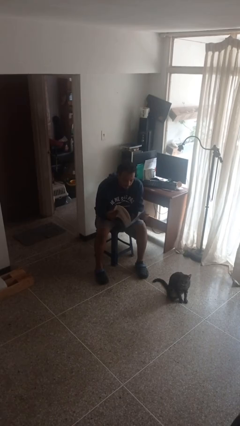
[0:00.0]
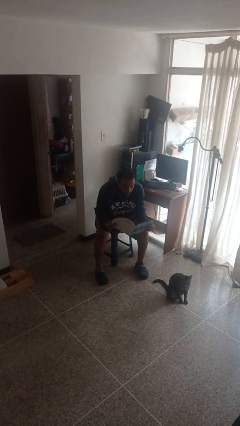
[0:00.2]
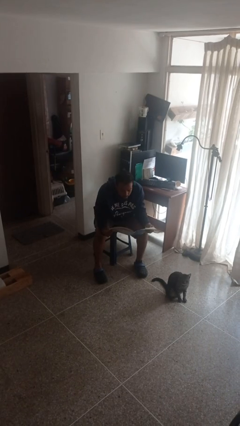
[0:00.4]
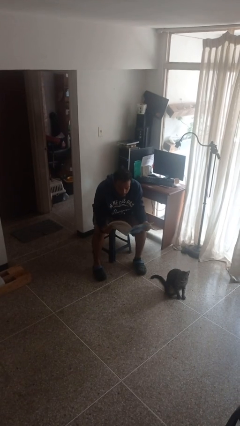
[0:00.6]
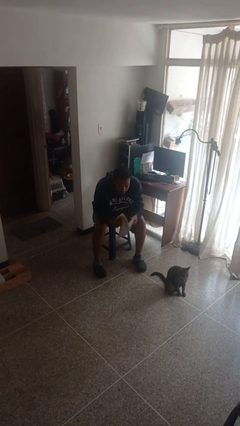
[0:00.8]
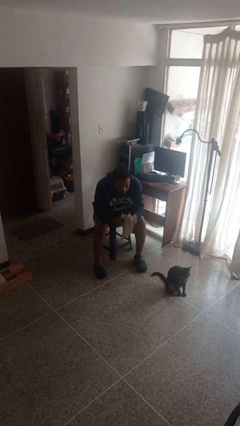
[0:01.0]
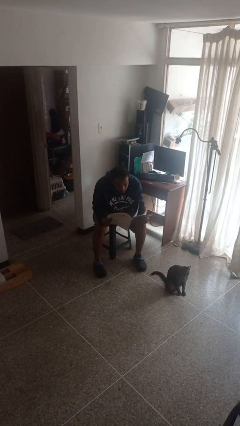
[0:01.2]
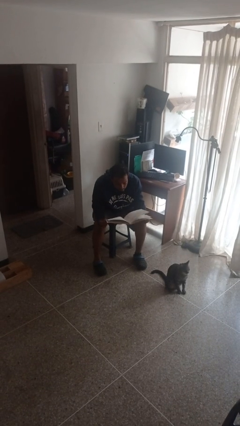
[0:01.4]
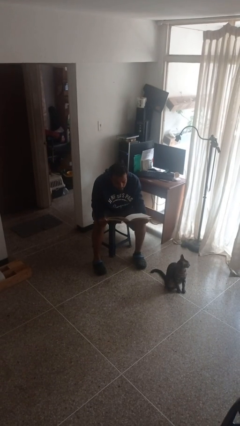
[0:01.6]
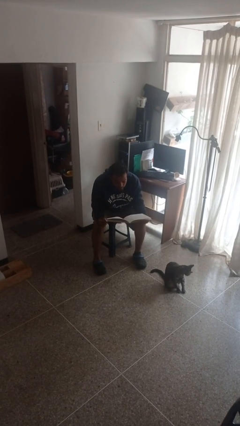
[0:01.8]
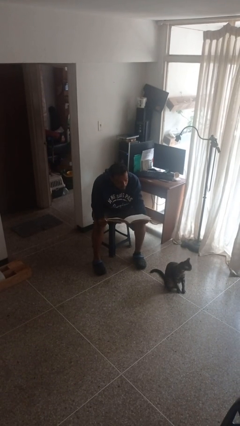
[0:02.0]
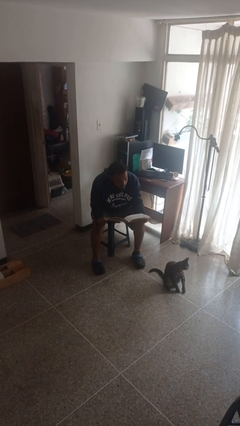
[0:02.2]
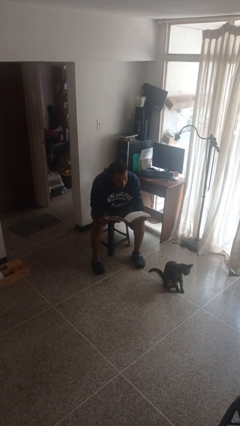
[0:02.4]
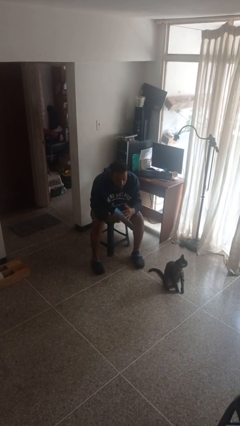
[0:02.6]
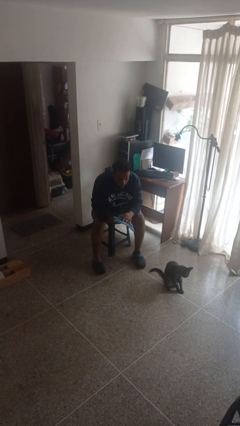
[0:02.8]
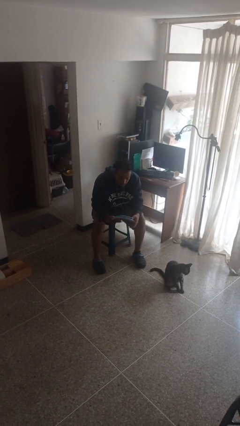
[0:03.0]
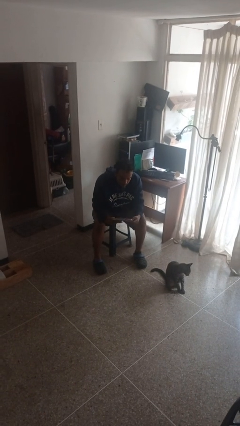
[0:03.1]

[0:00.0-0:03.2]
person reads magazine

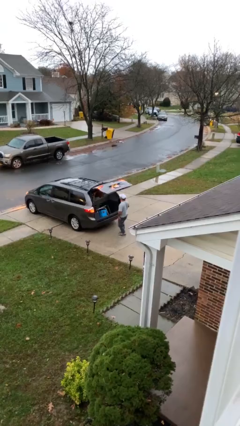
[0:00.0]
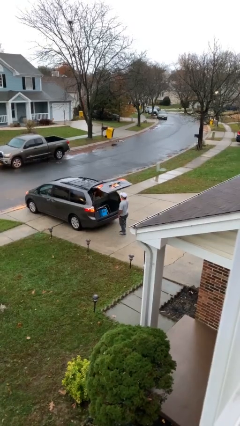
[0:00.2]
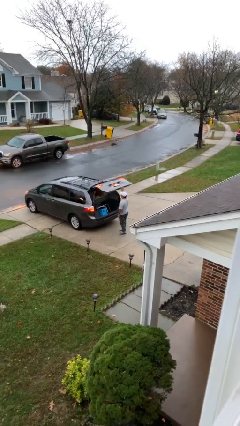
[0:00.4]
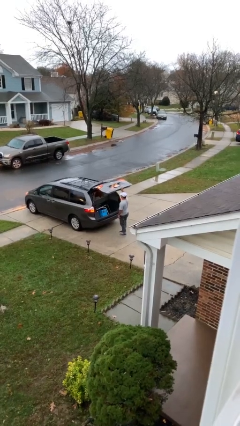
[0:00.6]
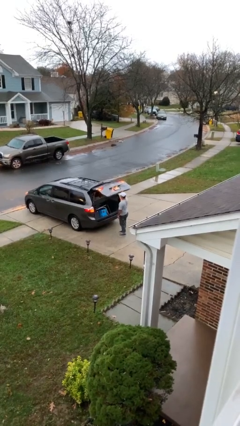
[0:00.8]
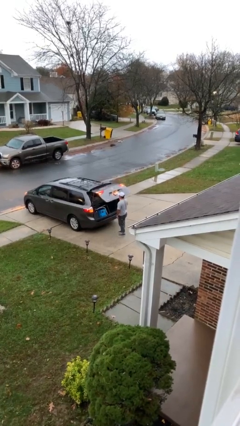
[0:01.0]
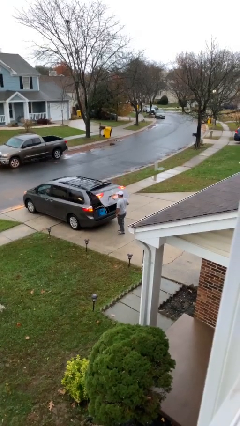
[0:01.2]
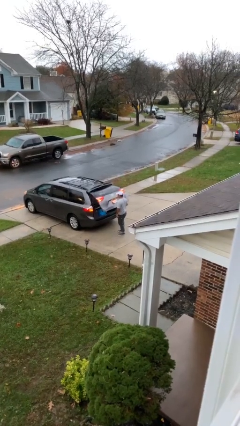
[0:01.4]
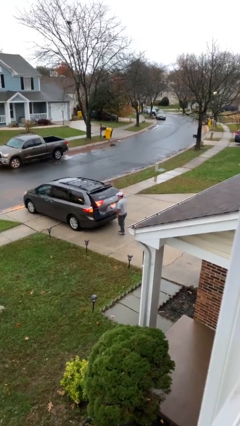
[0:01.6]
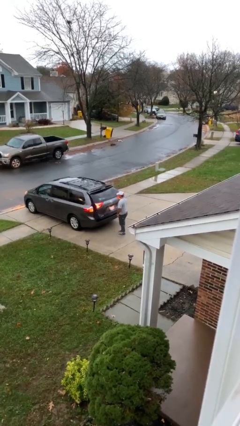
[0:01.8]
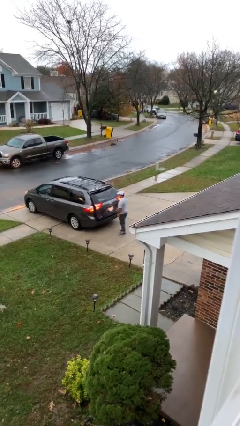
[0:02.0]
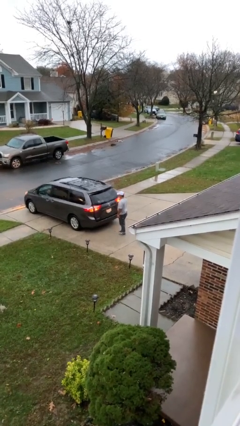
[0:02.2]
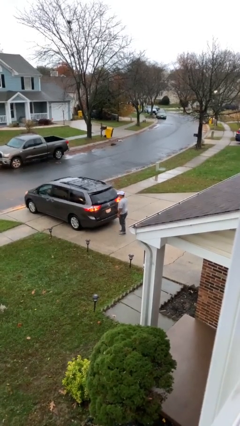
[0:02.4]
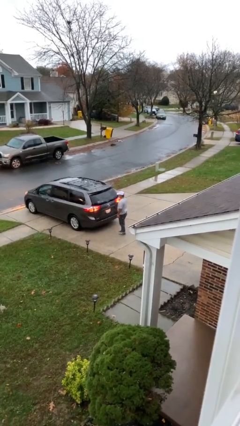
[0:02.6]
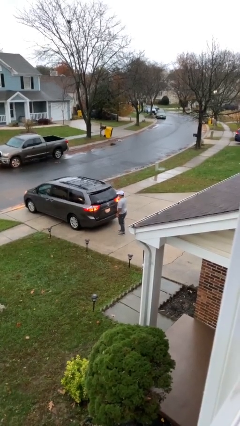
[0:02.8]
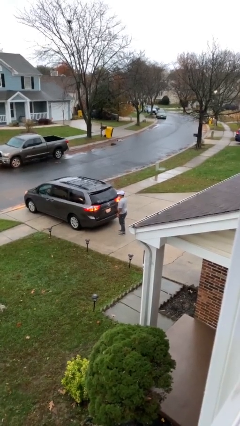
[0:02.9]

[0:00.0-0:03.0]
person closes car trunk

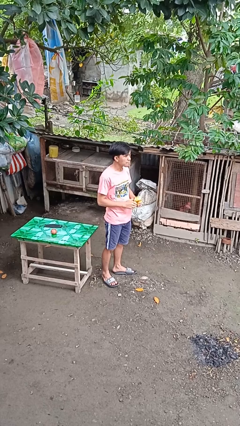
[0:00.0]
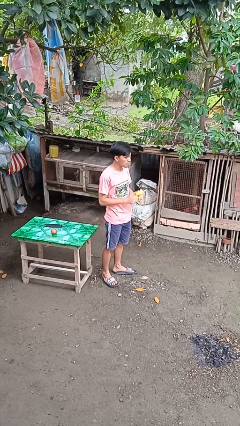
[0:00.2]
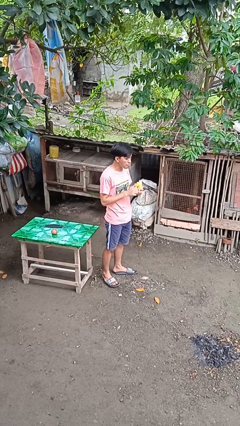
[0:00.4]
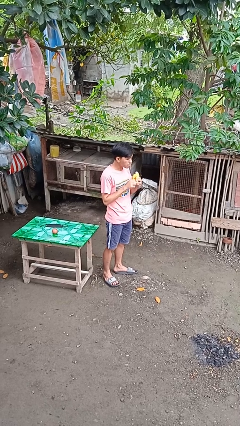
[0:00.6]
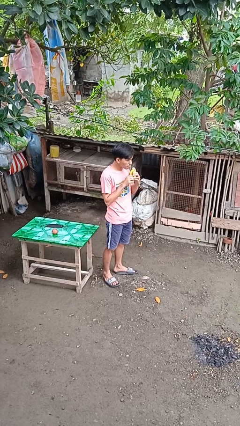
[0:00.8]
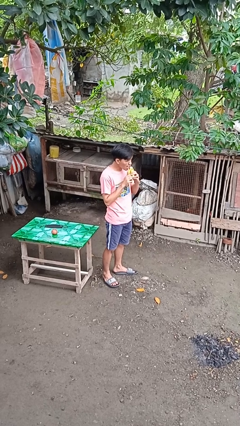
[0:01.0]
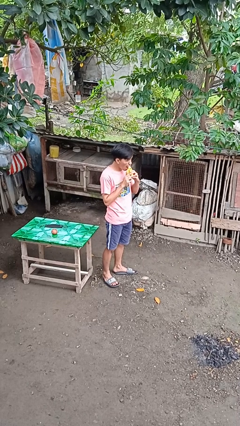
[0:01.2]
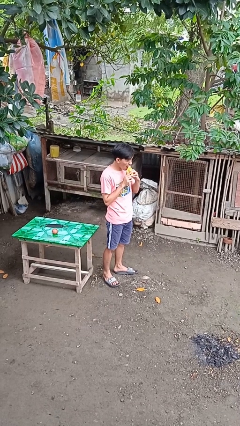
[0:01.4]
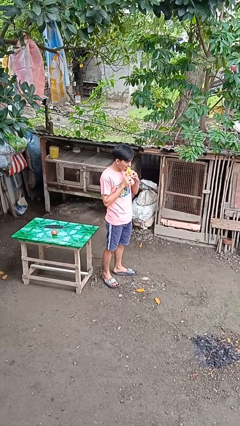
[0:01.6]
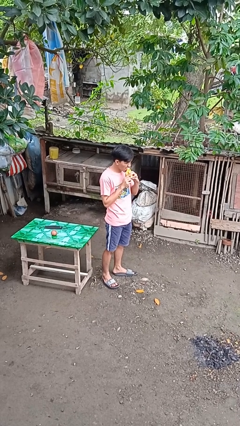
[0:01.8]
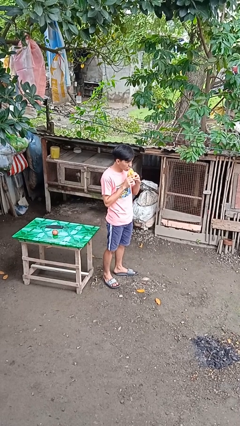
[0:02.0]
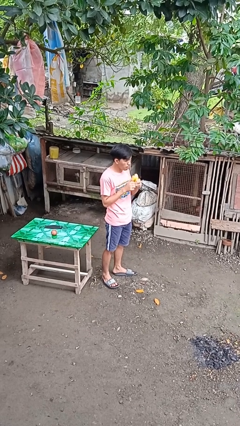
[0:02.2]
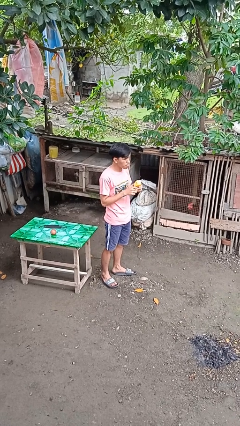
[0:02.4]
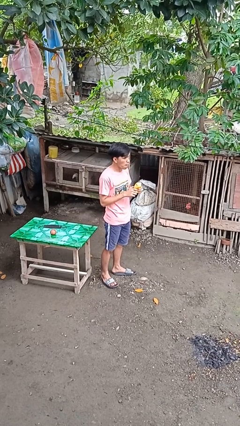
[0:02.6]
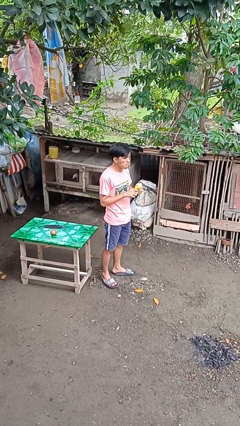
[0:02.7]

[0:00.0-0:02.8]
person eats banana

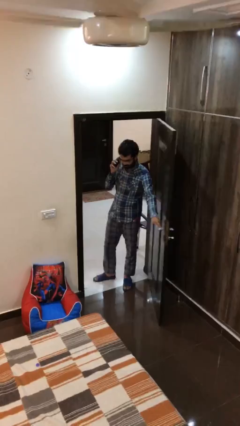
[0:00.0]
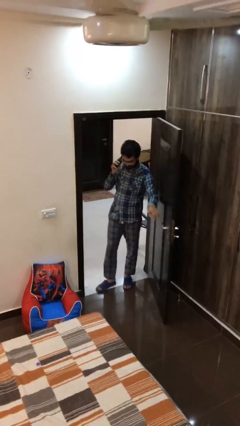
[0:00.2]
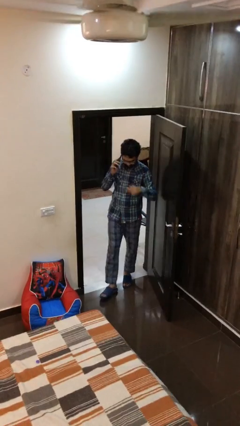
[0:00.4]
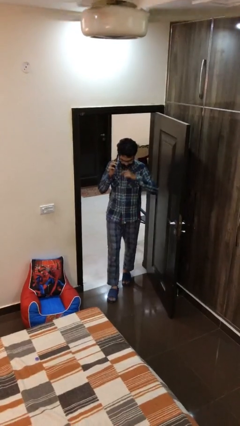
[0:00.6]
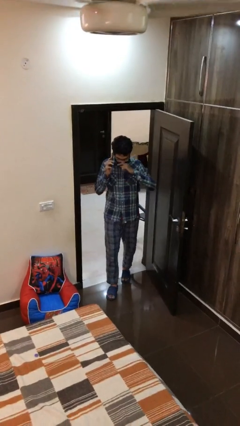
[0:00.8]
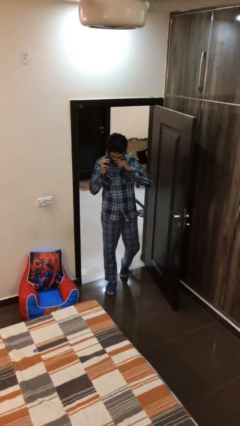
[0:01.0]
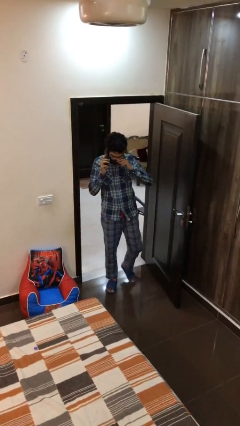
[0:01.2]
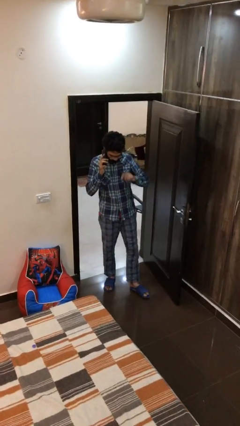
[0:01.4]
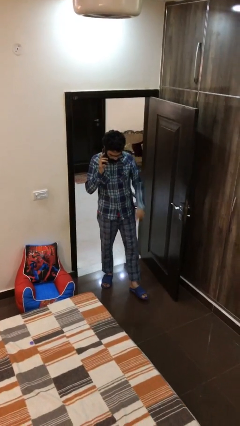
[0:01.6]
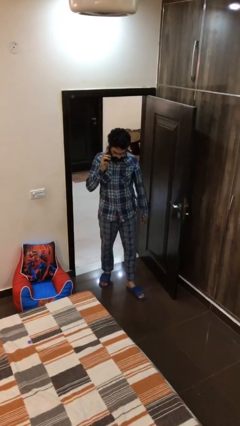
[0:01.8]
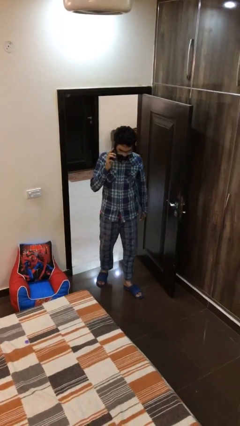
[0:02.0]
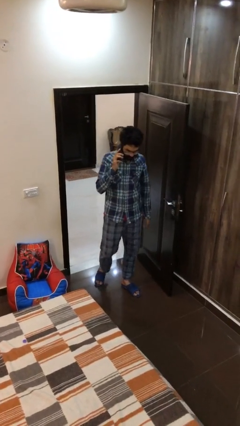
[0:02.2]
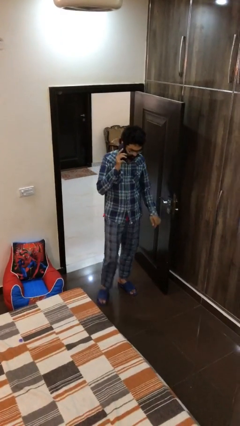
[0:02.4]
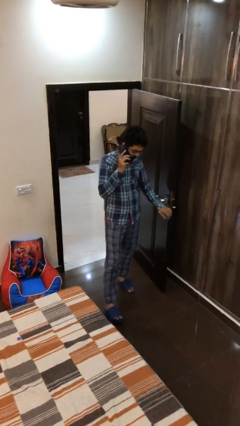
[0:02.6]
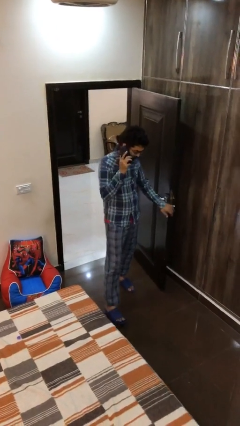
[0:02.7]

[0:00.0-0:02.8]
person enters scene through structure

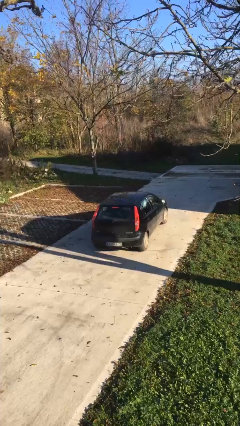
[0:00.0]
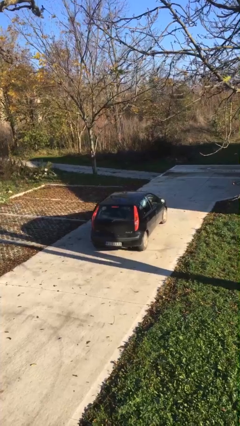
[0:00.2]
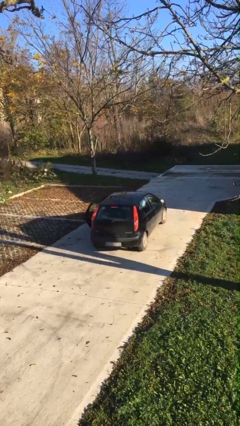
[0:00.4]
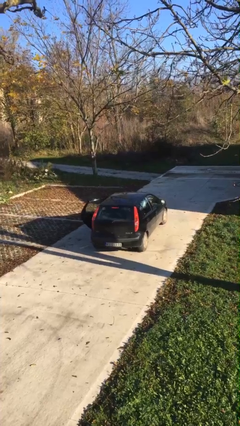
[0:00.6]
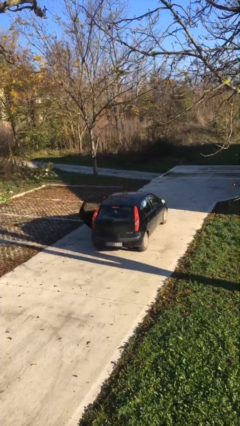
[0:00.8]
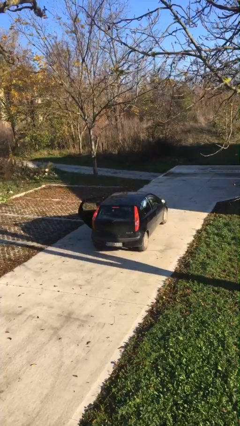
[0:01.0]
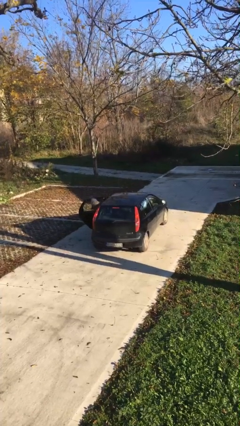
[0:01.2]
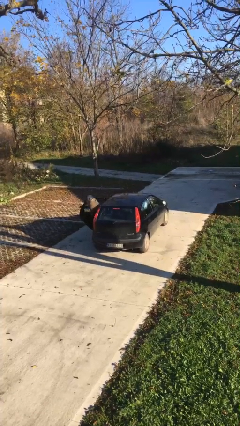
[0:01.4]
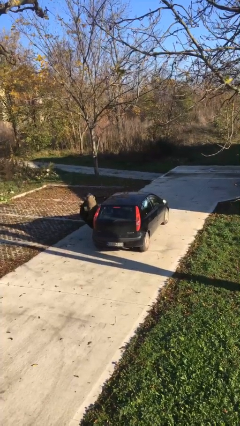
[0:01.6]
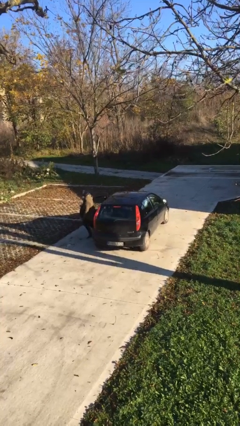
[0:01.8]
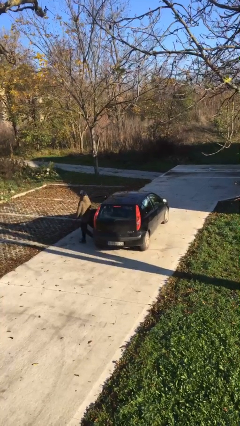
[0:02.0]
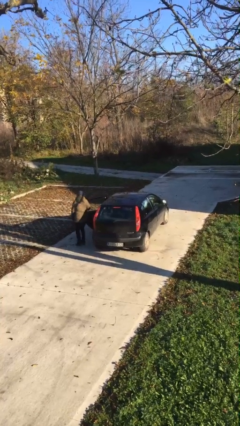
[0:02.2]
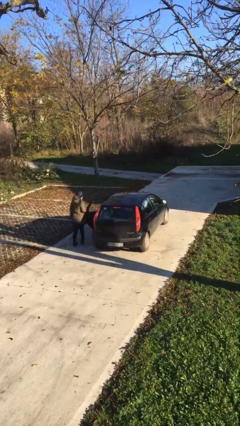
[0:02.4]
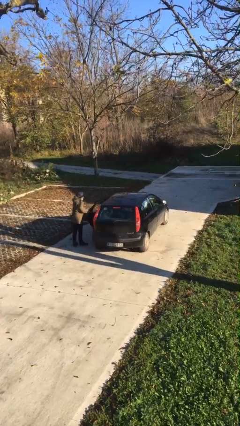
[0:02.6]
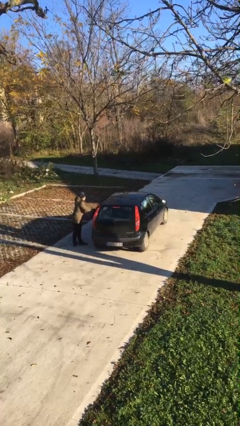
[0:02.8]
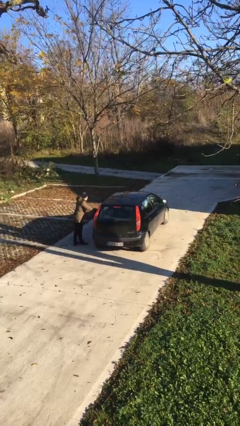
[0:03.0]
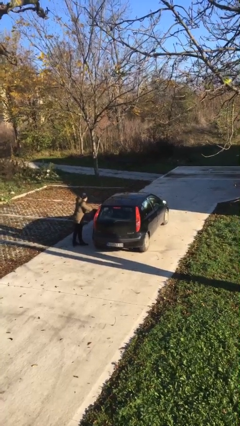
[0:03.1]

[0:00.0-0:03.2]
car drops off person

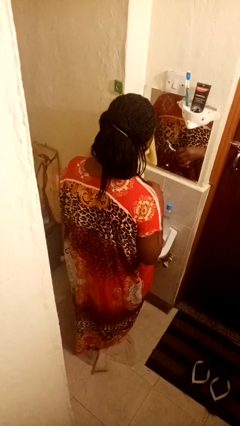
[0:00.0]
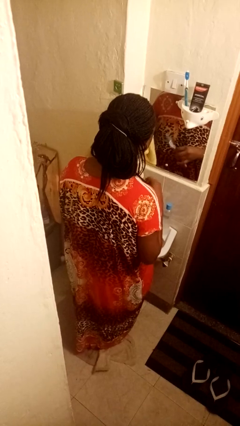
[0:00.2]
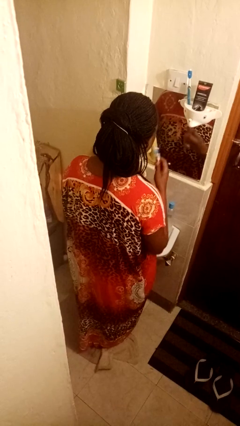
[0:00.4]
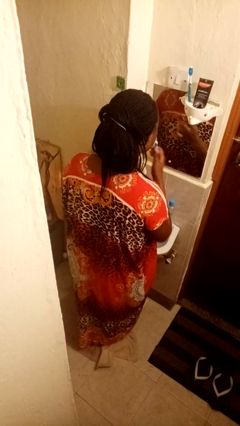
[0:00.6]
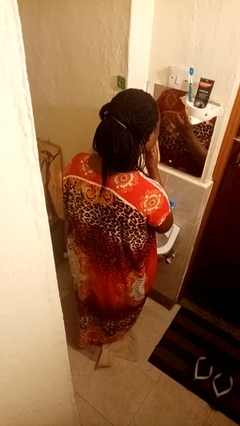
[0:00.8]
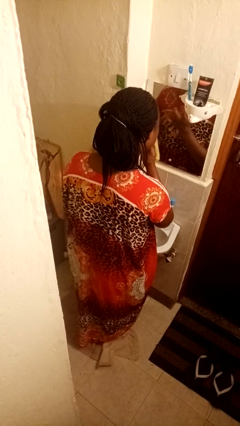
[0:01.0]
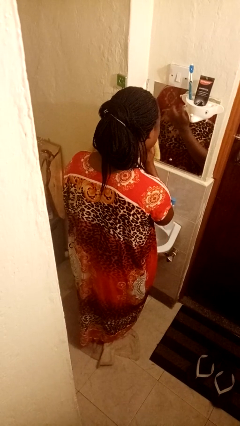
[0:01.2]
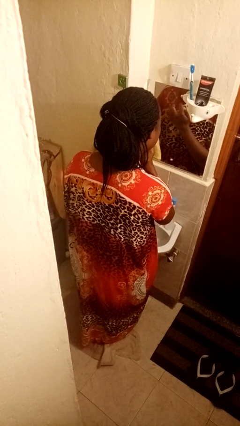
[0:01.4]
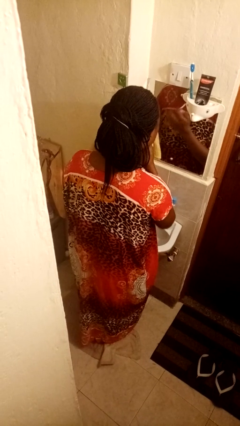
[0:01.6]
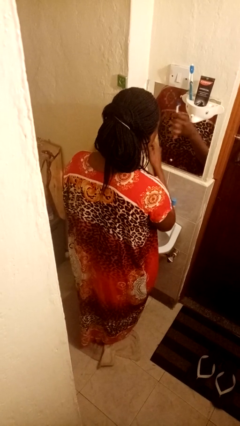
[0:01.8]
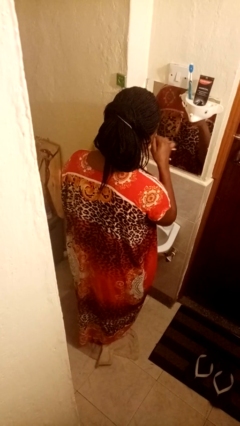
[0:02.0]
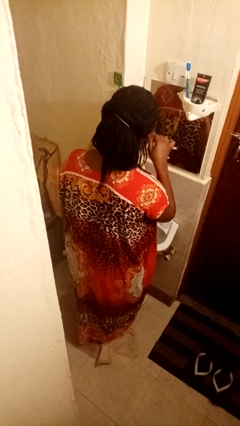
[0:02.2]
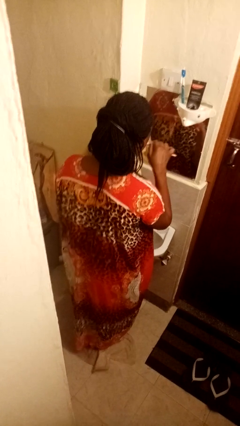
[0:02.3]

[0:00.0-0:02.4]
person brushes teeth

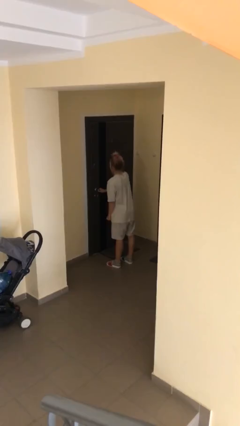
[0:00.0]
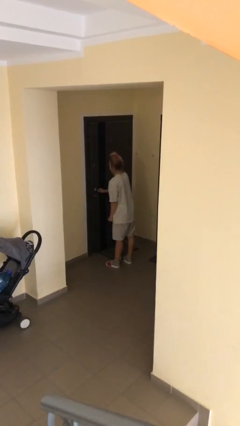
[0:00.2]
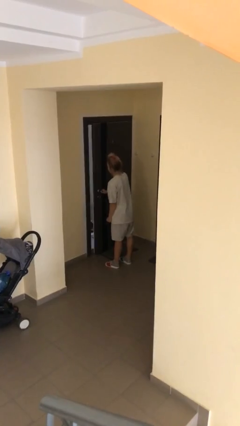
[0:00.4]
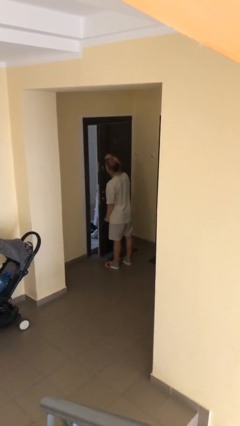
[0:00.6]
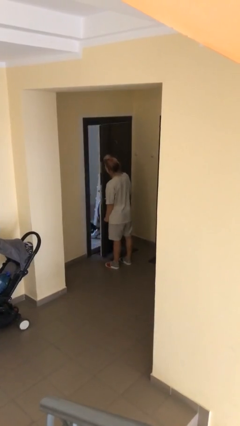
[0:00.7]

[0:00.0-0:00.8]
person opens facility door
